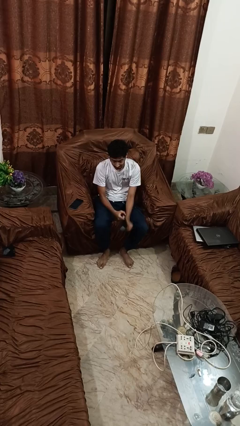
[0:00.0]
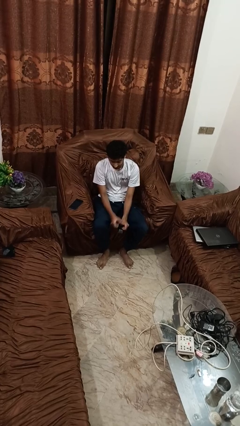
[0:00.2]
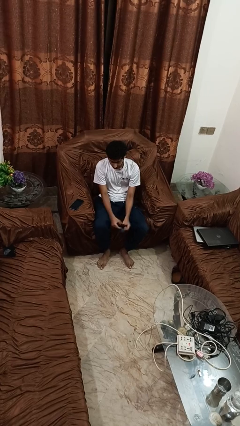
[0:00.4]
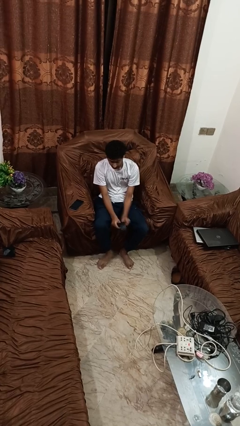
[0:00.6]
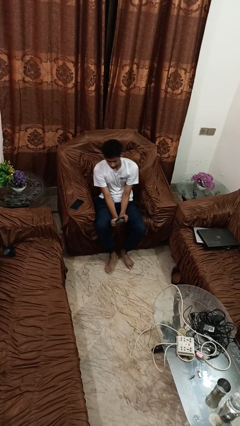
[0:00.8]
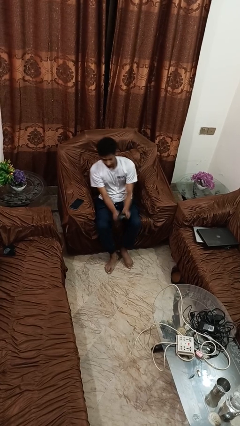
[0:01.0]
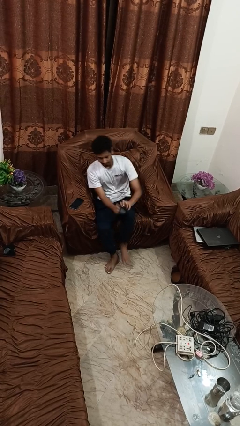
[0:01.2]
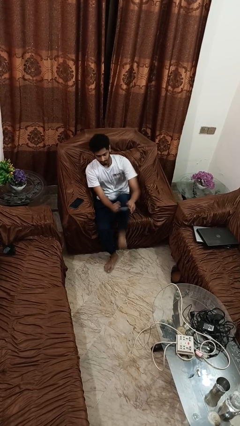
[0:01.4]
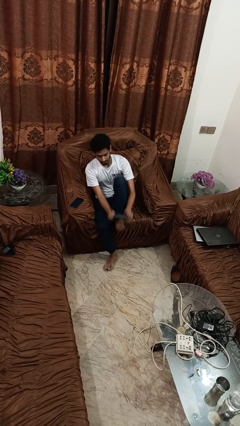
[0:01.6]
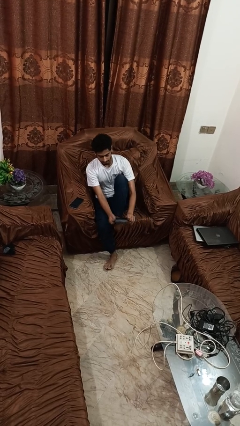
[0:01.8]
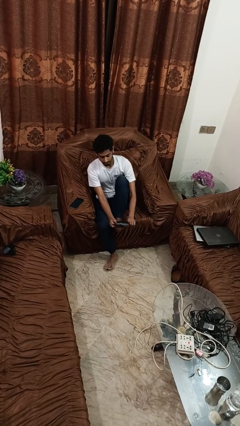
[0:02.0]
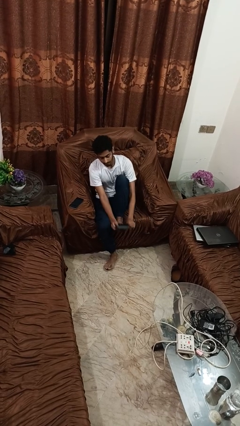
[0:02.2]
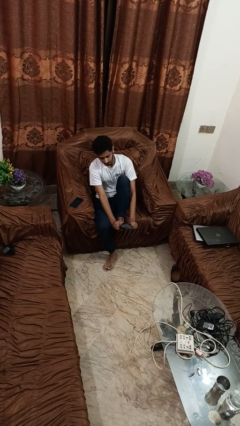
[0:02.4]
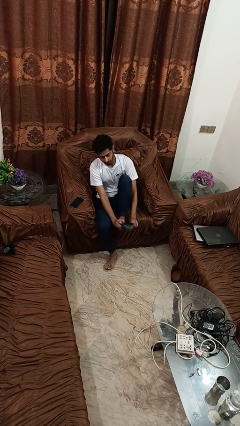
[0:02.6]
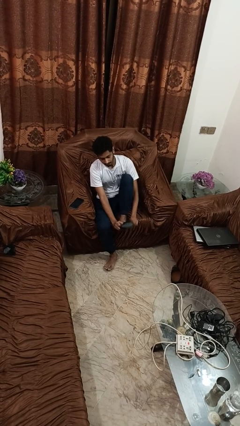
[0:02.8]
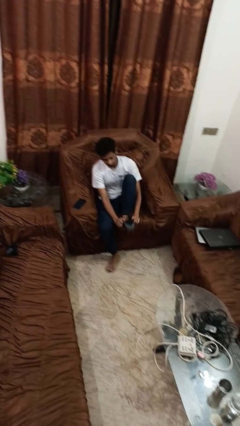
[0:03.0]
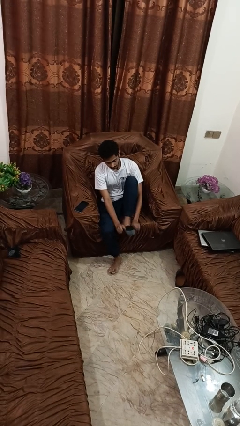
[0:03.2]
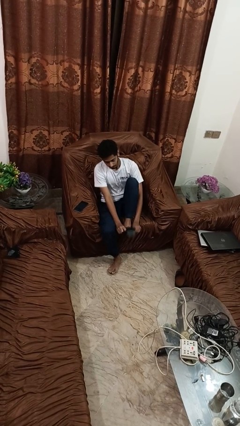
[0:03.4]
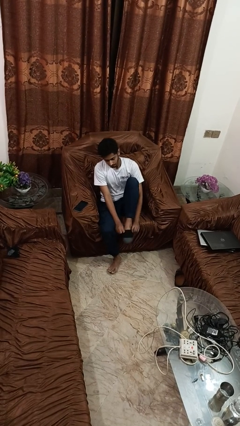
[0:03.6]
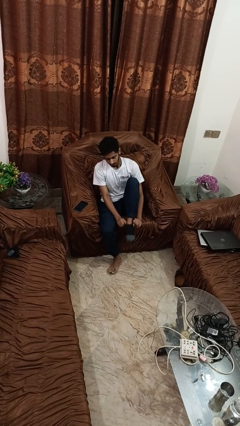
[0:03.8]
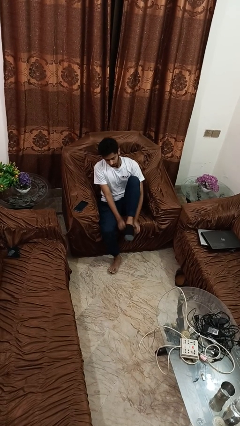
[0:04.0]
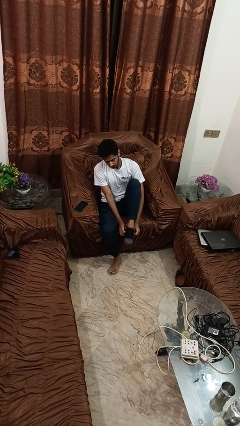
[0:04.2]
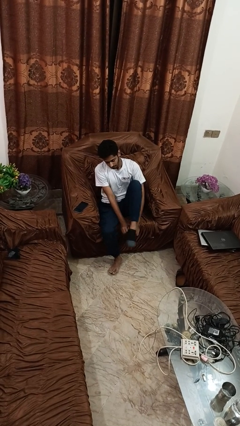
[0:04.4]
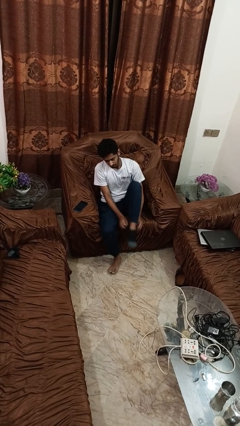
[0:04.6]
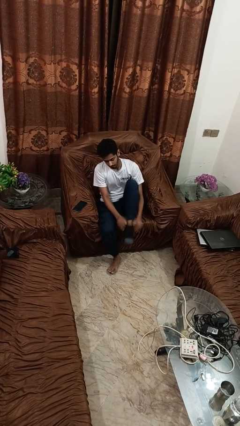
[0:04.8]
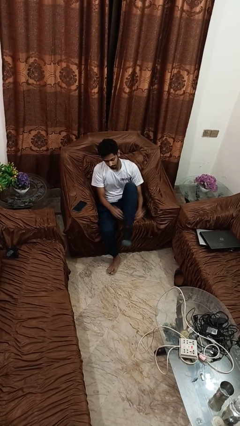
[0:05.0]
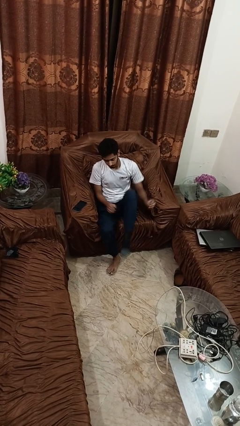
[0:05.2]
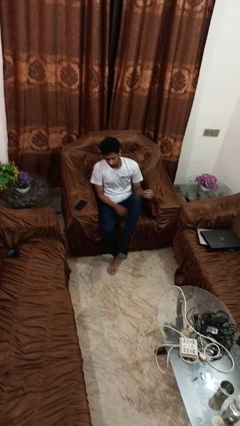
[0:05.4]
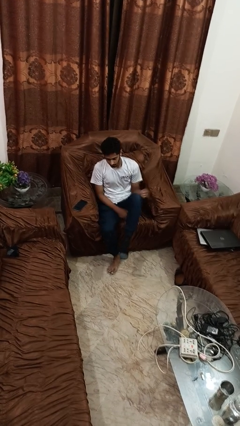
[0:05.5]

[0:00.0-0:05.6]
person puts on socks

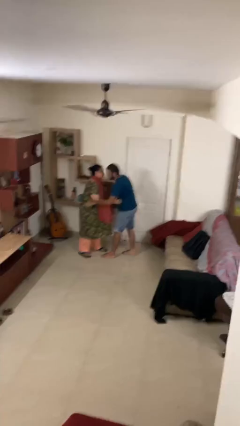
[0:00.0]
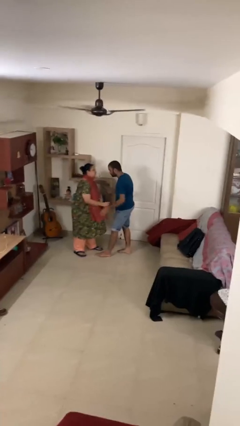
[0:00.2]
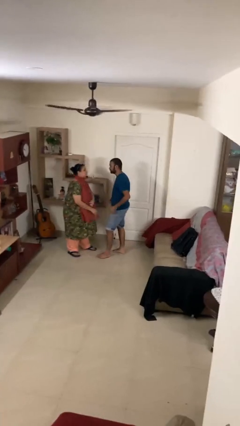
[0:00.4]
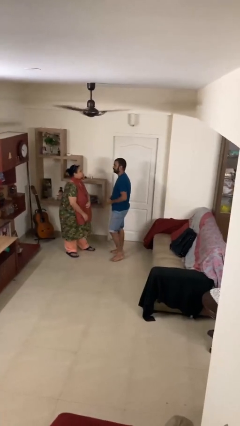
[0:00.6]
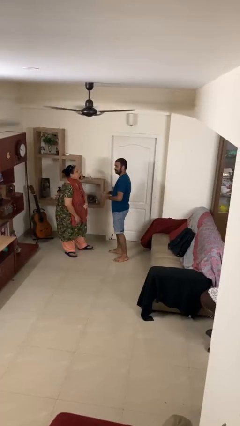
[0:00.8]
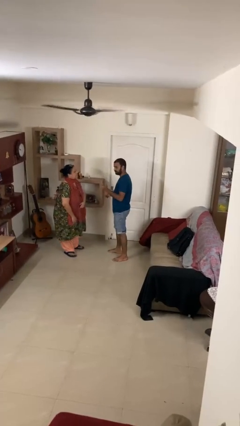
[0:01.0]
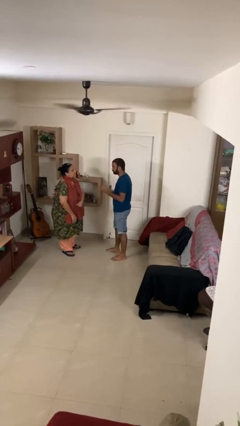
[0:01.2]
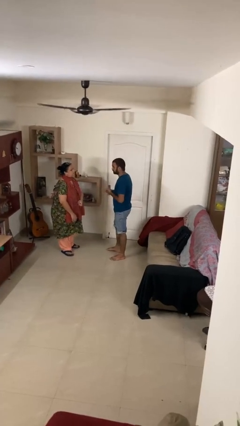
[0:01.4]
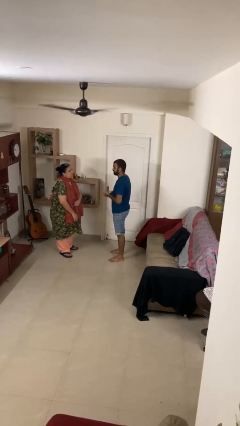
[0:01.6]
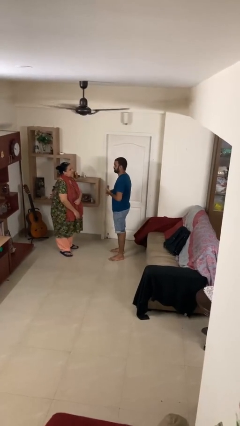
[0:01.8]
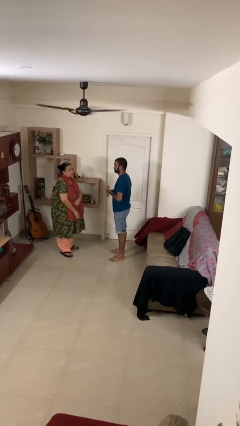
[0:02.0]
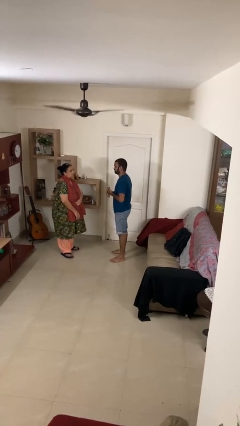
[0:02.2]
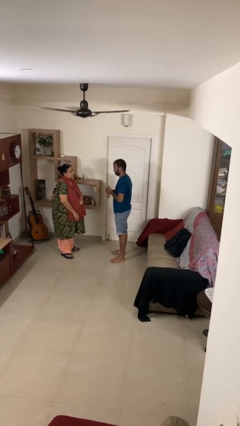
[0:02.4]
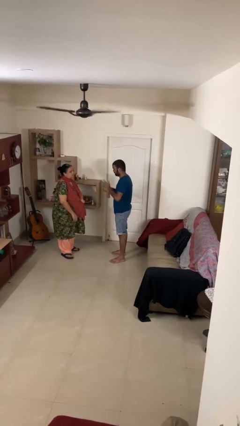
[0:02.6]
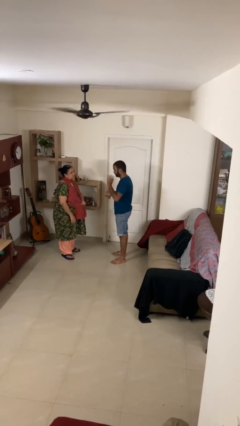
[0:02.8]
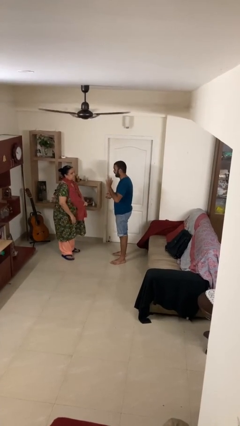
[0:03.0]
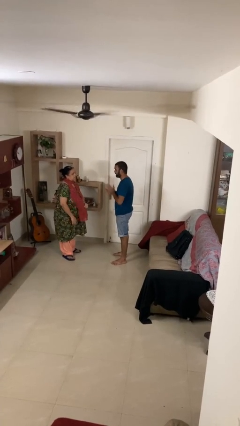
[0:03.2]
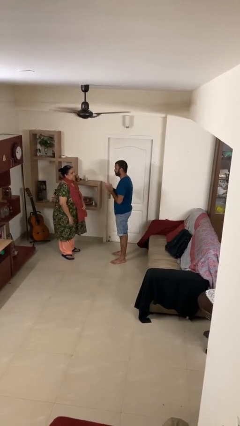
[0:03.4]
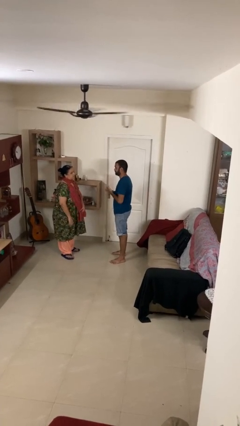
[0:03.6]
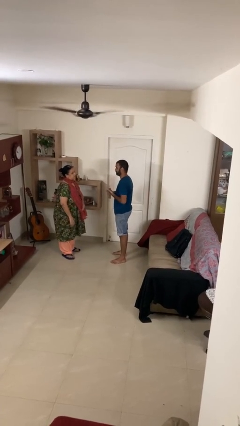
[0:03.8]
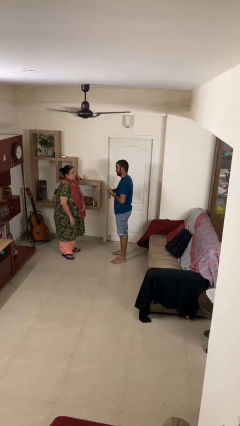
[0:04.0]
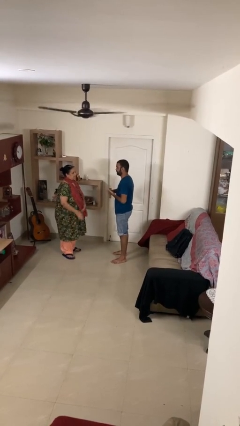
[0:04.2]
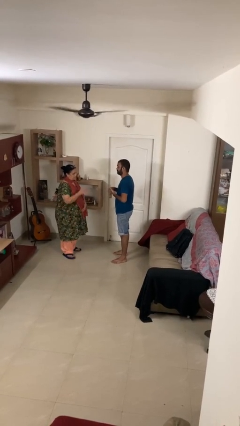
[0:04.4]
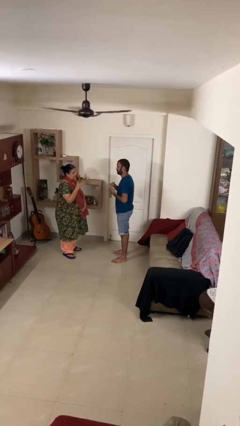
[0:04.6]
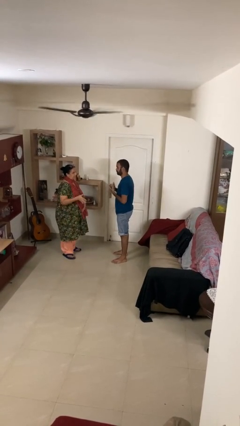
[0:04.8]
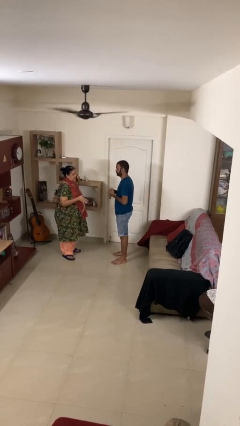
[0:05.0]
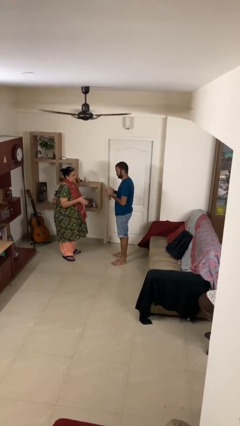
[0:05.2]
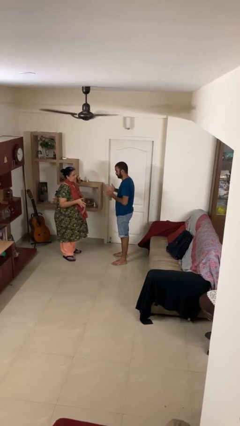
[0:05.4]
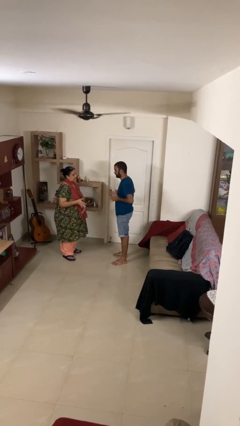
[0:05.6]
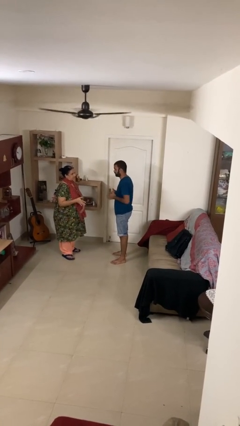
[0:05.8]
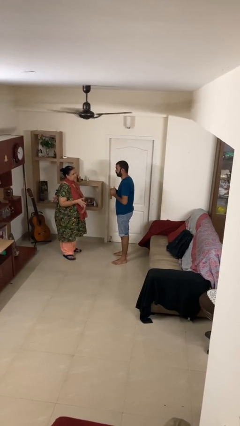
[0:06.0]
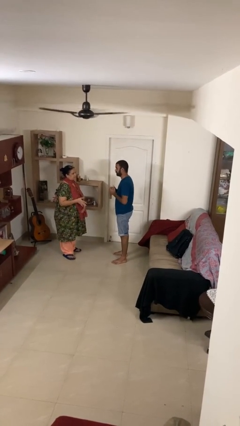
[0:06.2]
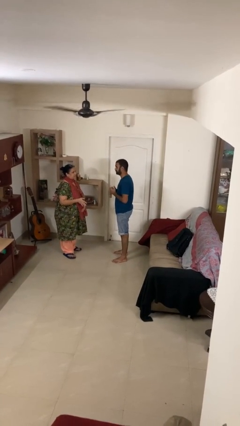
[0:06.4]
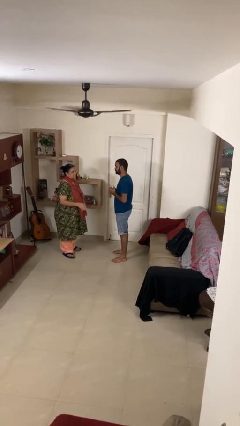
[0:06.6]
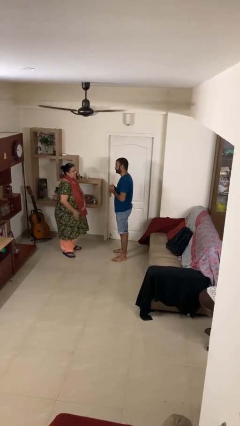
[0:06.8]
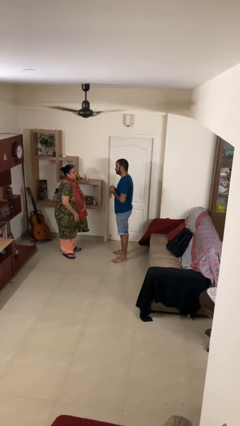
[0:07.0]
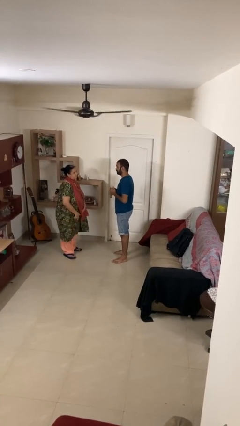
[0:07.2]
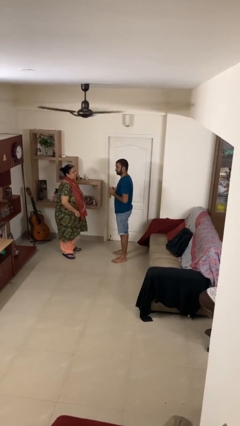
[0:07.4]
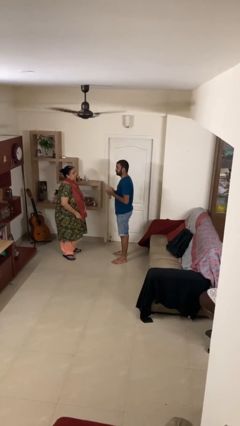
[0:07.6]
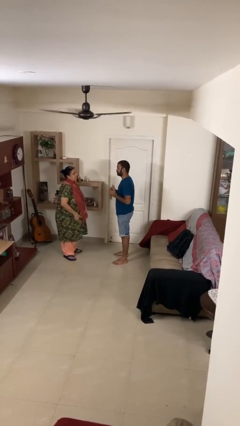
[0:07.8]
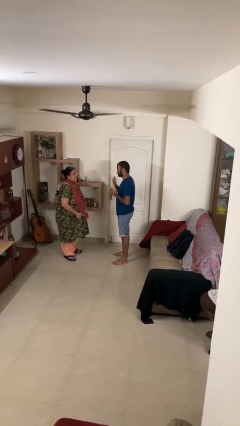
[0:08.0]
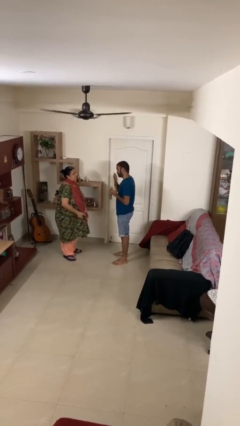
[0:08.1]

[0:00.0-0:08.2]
person talks to person

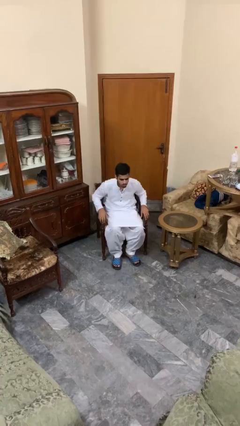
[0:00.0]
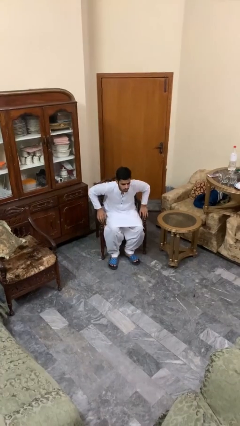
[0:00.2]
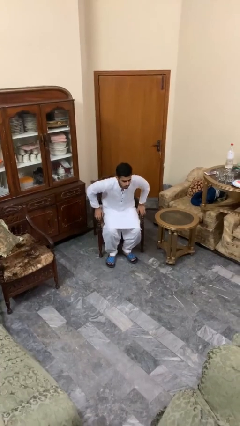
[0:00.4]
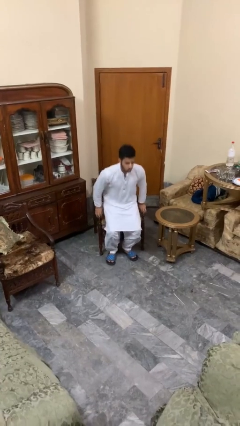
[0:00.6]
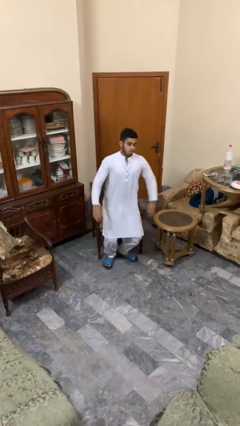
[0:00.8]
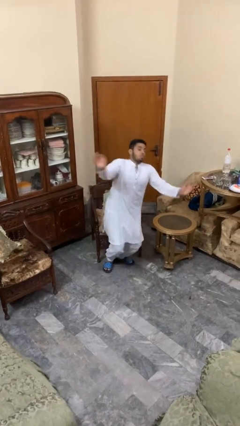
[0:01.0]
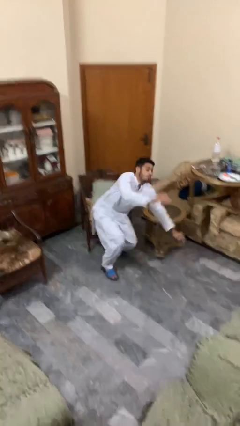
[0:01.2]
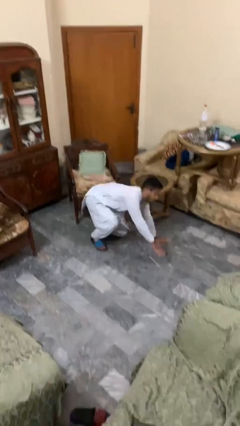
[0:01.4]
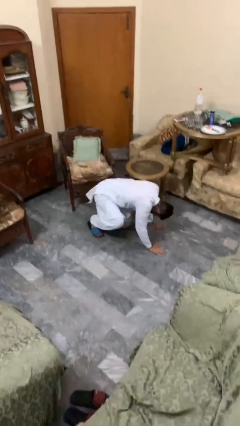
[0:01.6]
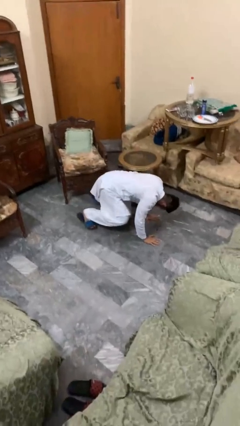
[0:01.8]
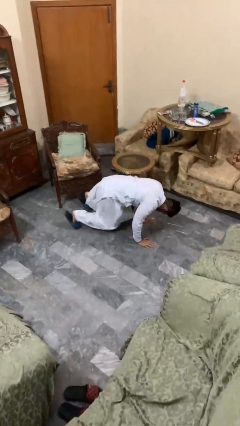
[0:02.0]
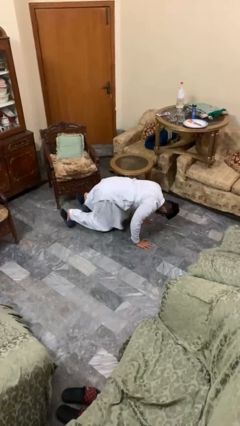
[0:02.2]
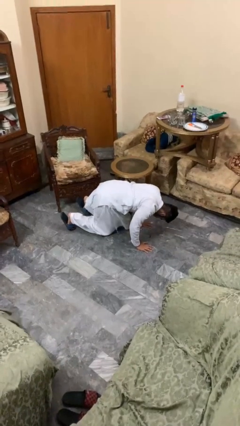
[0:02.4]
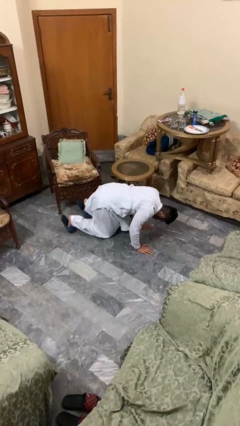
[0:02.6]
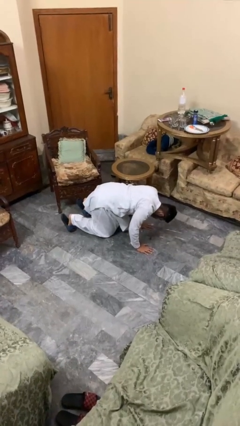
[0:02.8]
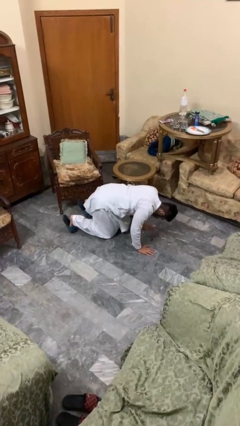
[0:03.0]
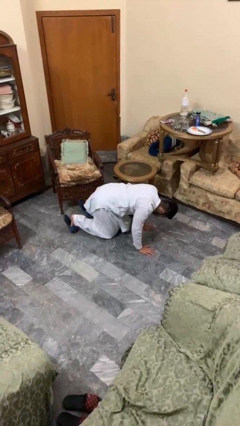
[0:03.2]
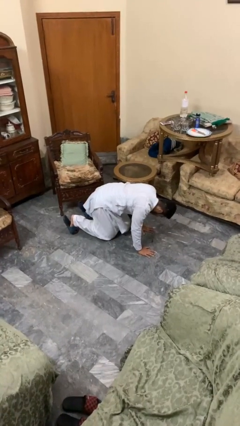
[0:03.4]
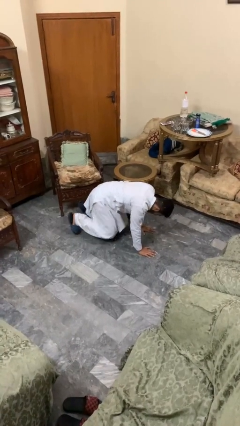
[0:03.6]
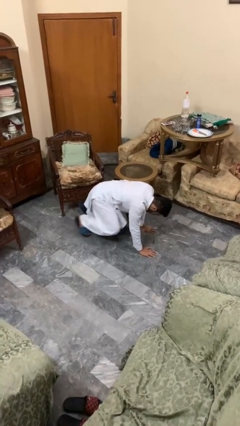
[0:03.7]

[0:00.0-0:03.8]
person falls from chair

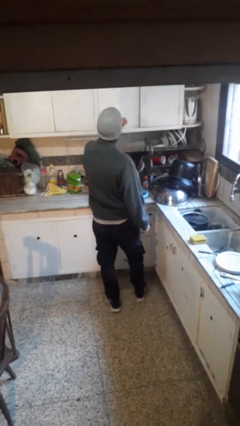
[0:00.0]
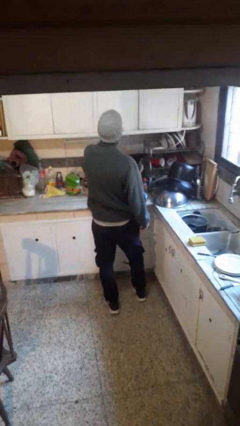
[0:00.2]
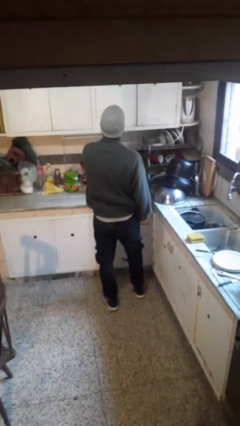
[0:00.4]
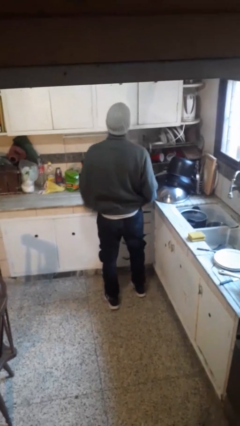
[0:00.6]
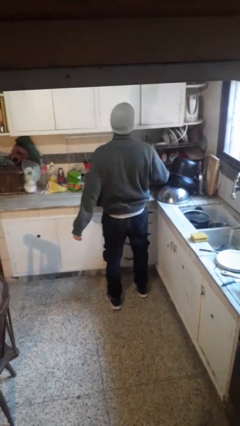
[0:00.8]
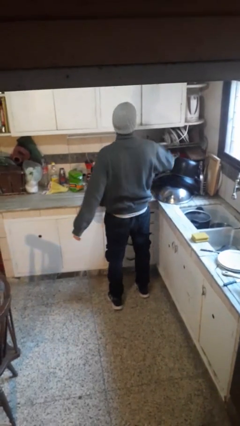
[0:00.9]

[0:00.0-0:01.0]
person closes cabinet
